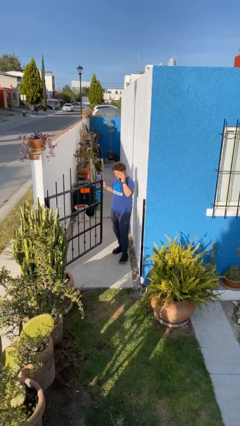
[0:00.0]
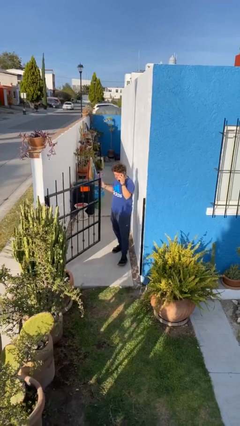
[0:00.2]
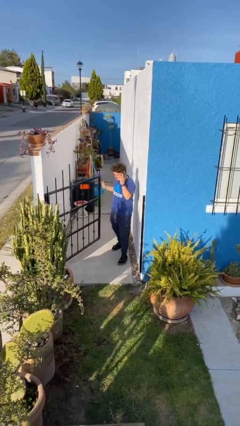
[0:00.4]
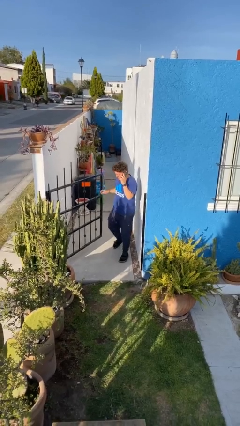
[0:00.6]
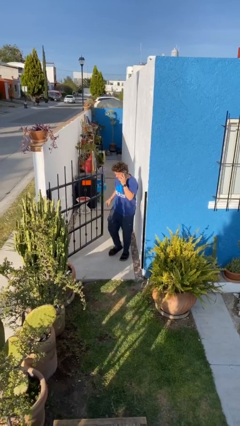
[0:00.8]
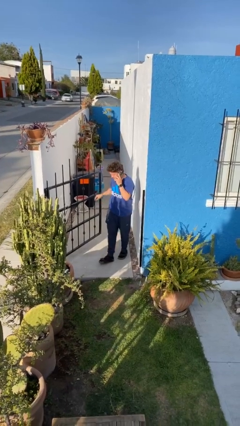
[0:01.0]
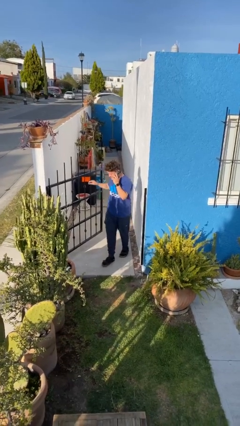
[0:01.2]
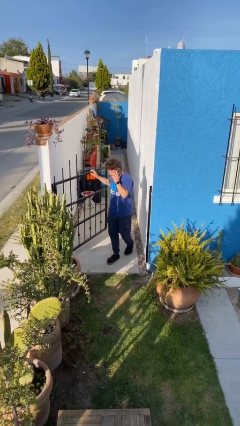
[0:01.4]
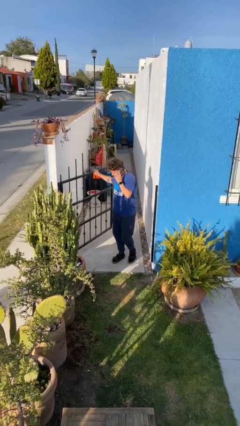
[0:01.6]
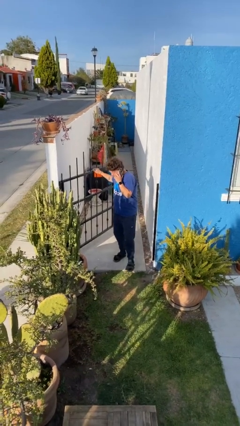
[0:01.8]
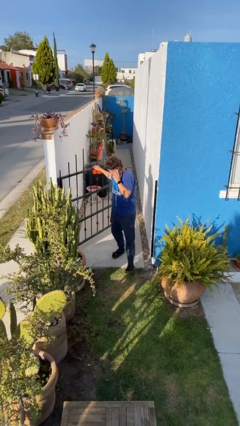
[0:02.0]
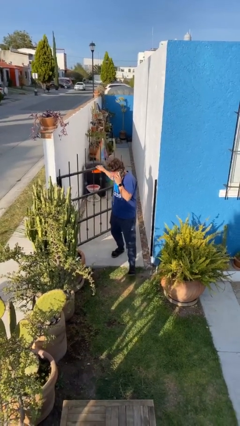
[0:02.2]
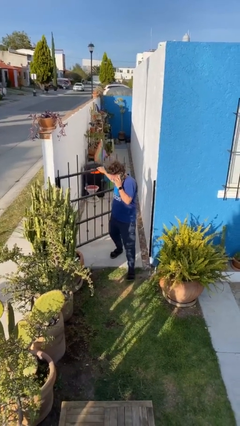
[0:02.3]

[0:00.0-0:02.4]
person enters scene through structure

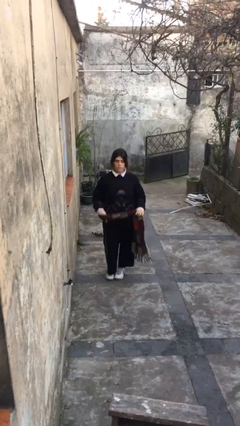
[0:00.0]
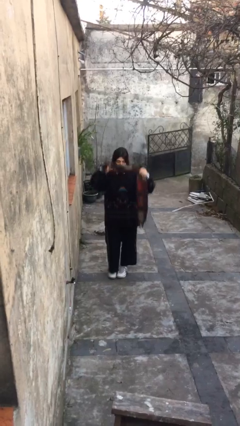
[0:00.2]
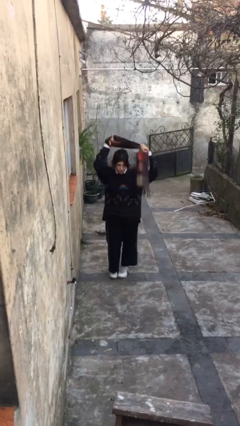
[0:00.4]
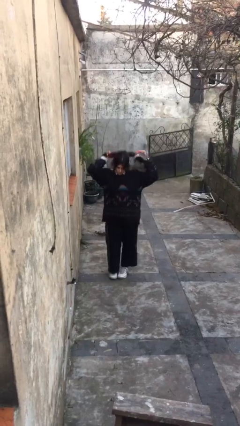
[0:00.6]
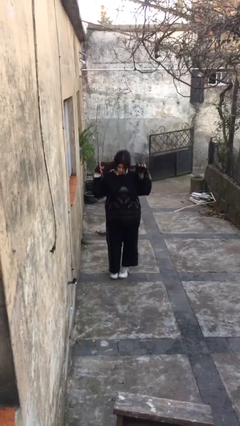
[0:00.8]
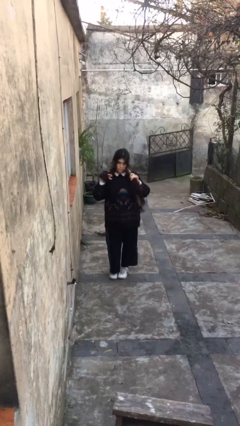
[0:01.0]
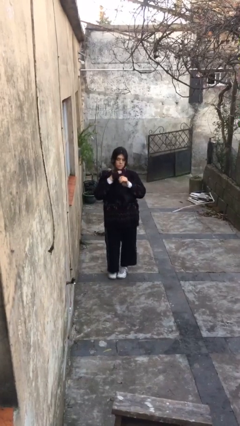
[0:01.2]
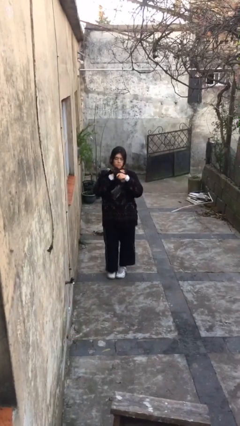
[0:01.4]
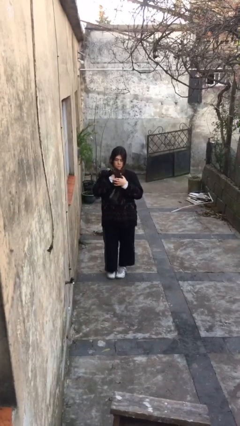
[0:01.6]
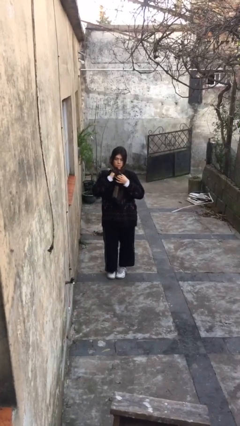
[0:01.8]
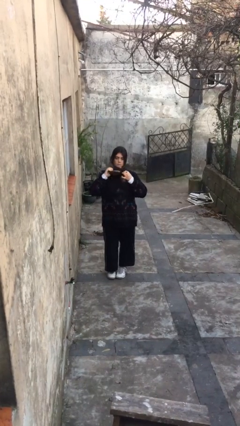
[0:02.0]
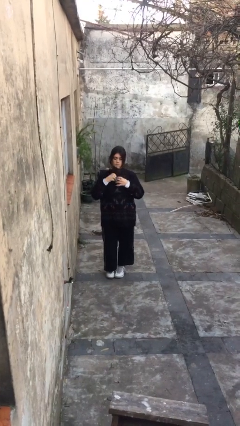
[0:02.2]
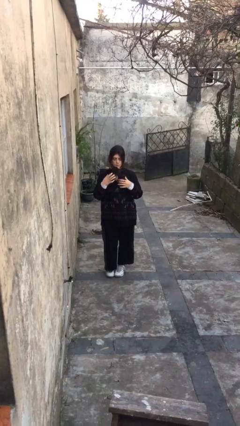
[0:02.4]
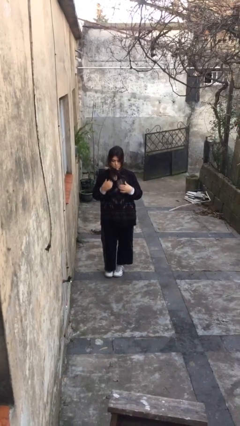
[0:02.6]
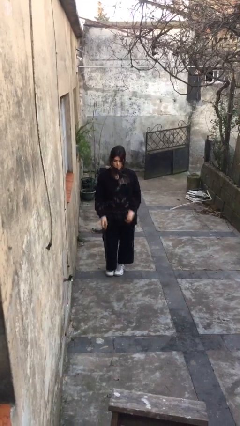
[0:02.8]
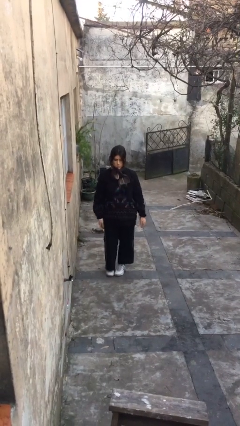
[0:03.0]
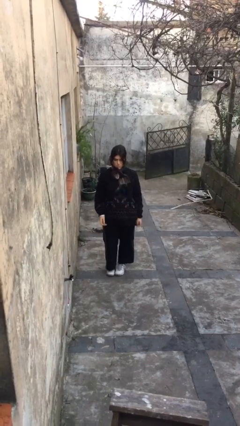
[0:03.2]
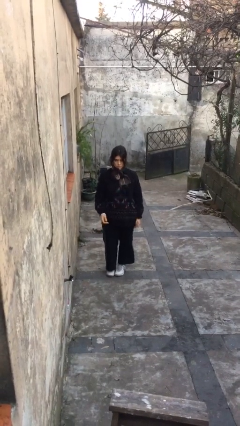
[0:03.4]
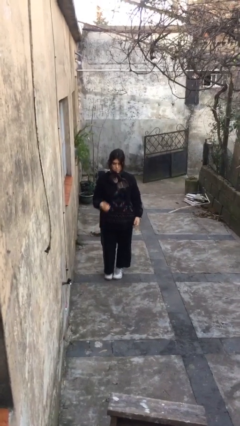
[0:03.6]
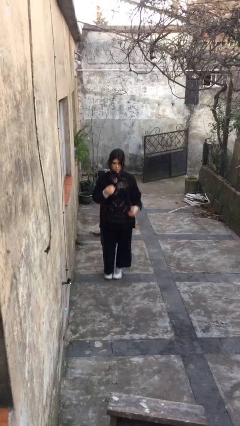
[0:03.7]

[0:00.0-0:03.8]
person puts on scarf

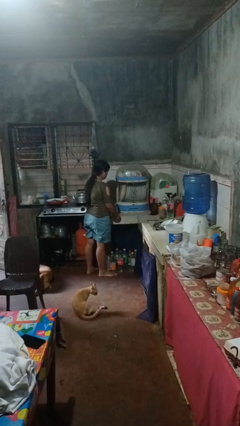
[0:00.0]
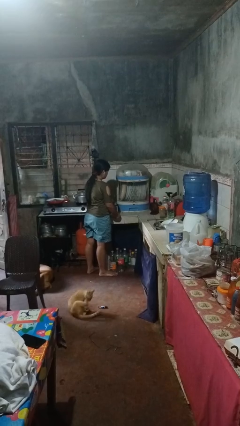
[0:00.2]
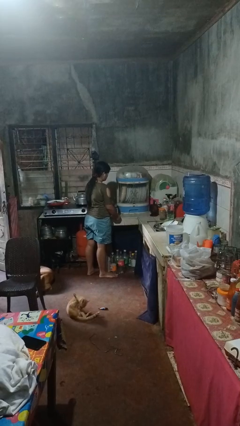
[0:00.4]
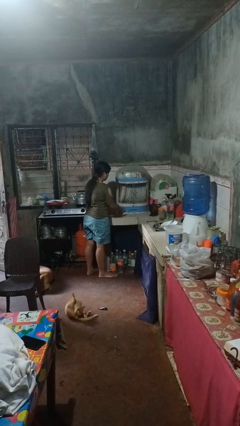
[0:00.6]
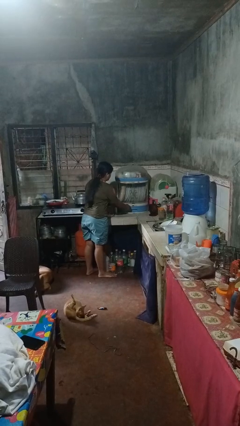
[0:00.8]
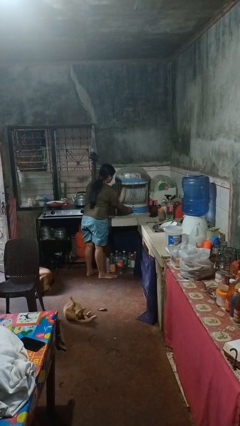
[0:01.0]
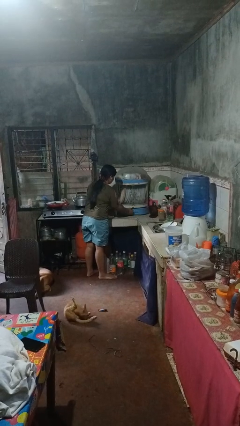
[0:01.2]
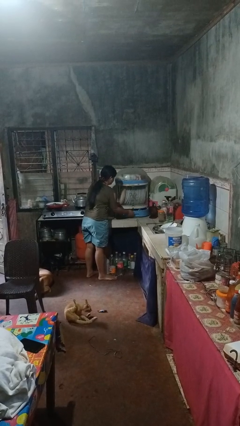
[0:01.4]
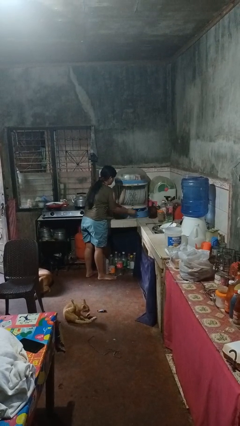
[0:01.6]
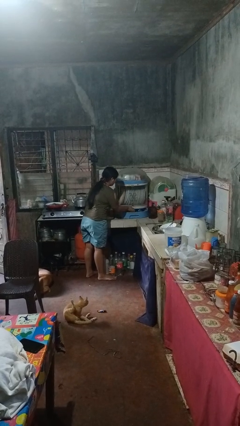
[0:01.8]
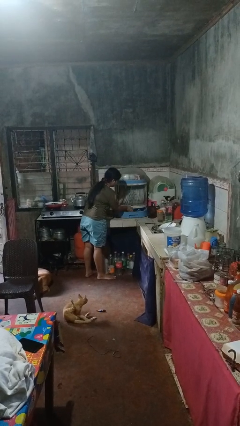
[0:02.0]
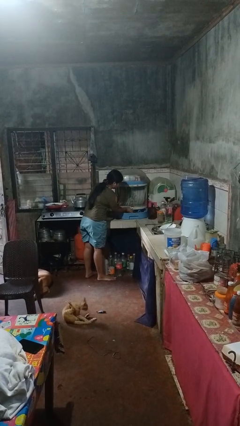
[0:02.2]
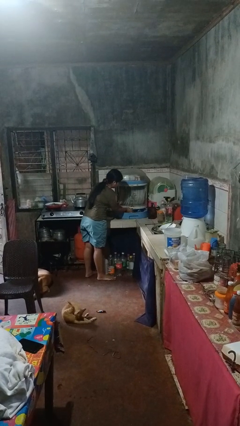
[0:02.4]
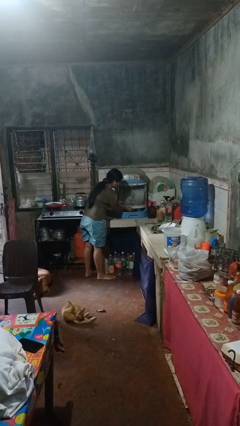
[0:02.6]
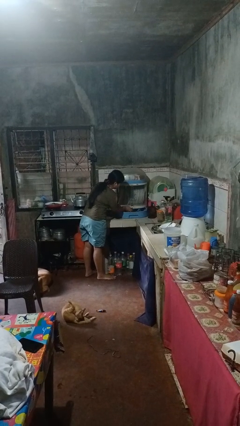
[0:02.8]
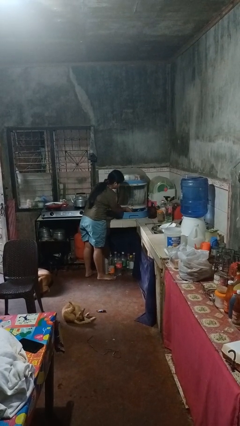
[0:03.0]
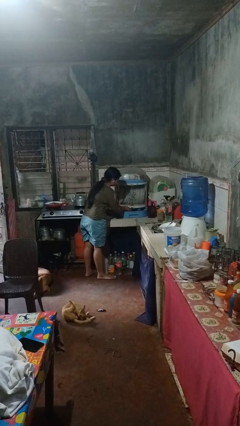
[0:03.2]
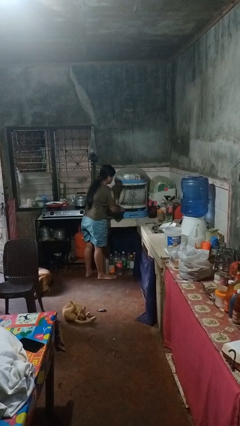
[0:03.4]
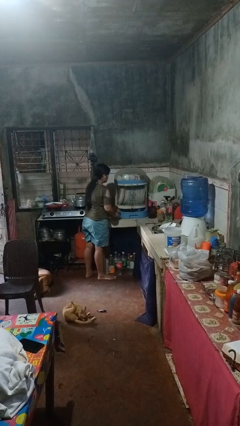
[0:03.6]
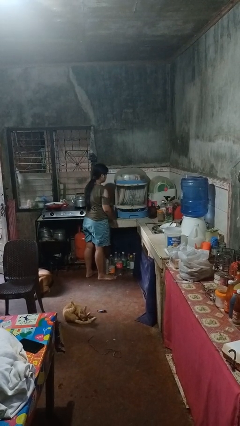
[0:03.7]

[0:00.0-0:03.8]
person searches in kitchen drawer

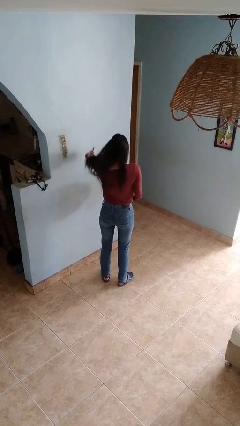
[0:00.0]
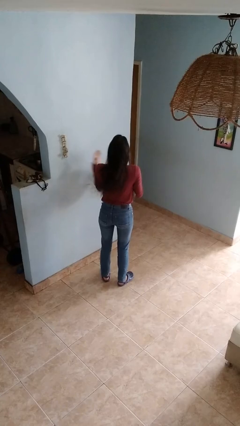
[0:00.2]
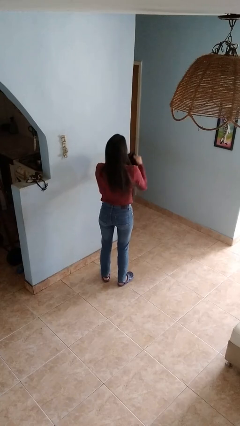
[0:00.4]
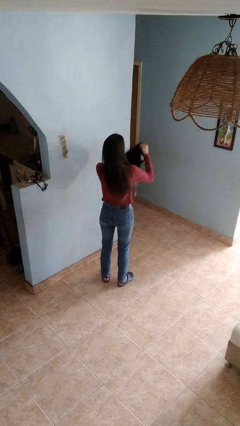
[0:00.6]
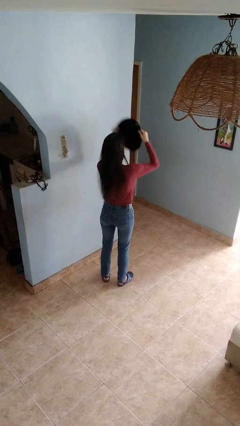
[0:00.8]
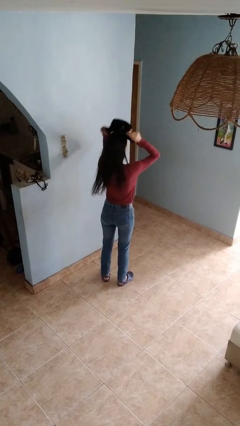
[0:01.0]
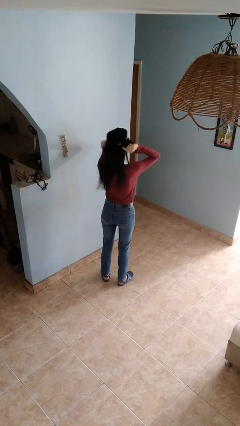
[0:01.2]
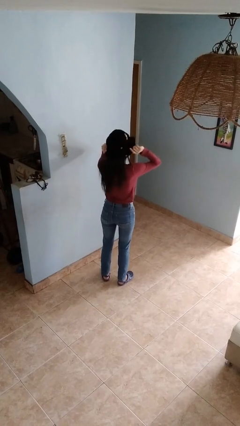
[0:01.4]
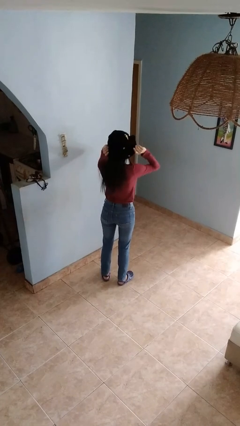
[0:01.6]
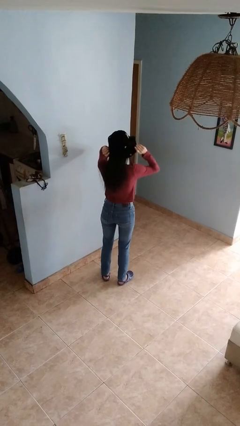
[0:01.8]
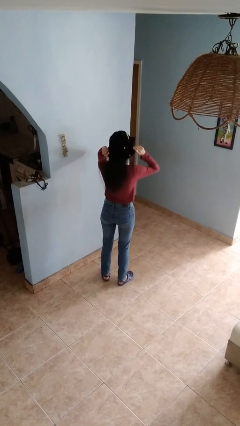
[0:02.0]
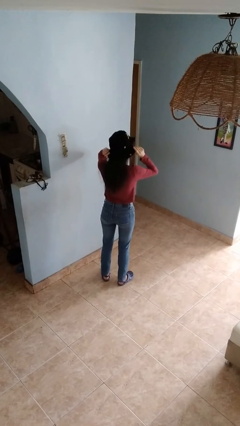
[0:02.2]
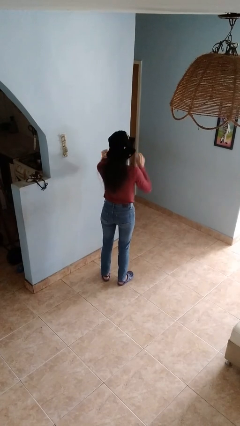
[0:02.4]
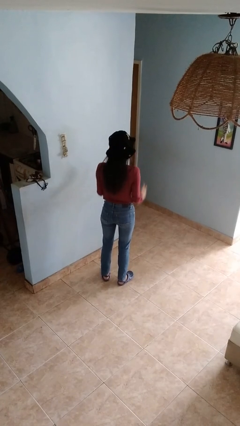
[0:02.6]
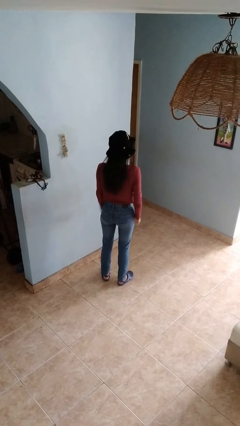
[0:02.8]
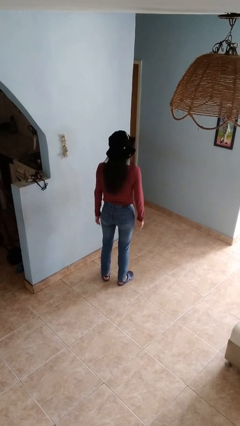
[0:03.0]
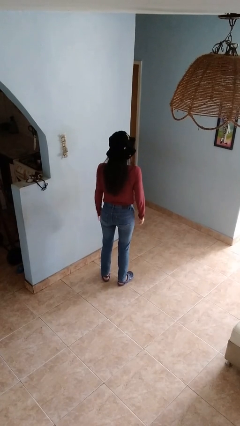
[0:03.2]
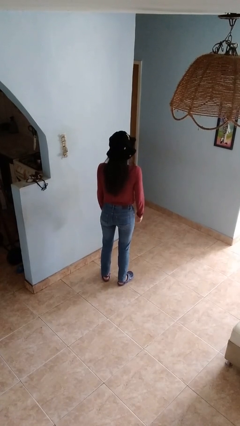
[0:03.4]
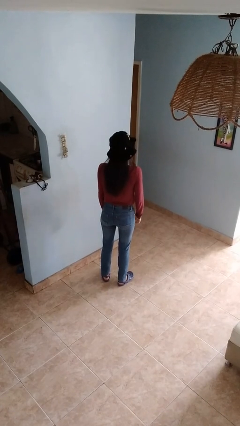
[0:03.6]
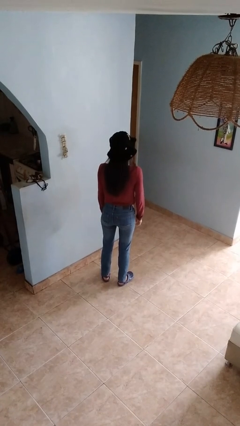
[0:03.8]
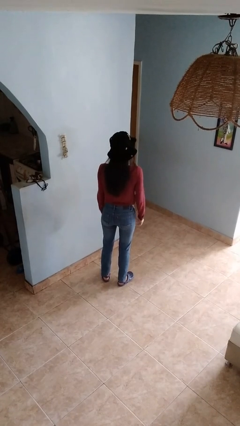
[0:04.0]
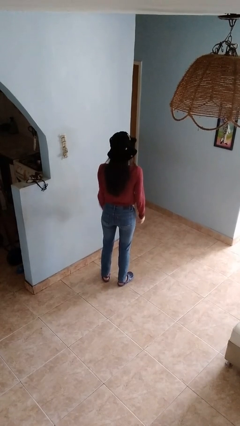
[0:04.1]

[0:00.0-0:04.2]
person puts on hat

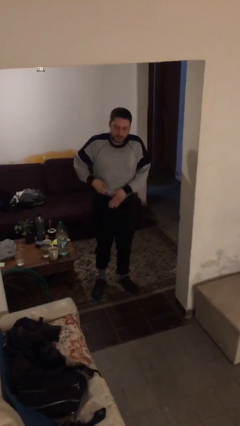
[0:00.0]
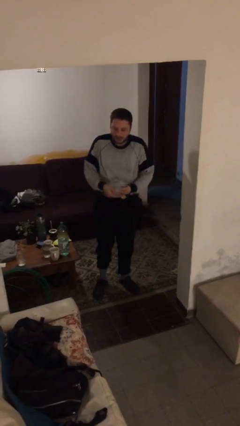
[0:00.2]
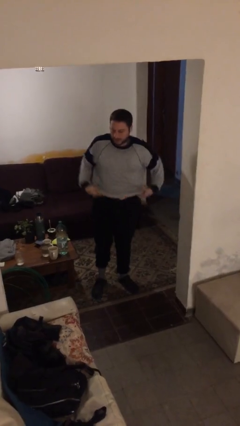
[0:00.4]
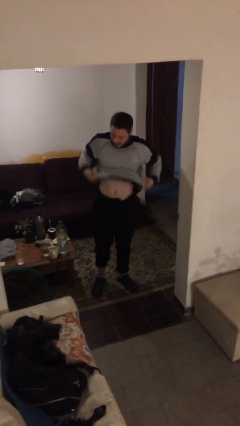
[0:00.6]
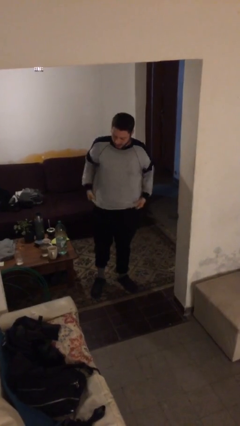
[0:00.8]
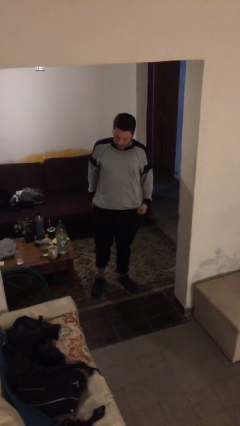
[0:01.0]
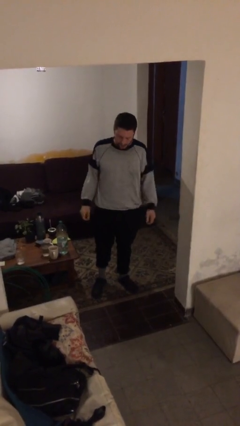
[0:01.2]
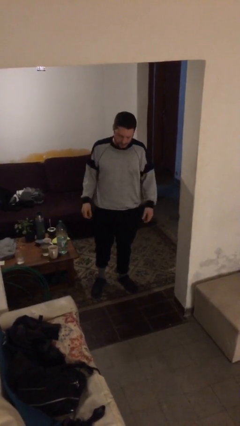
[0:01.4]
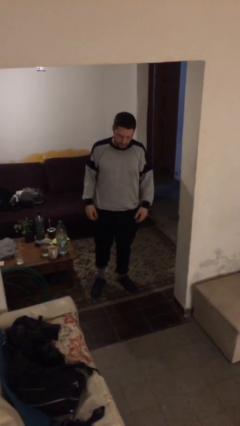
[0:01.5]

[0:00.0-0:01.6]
person untucks shirt

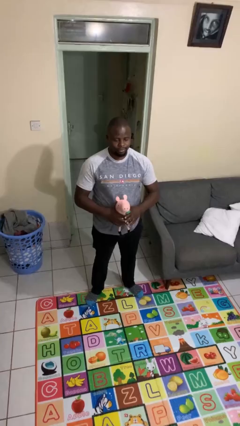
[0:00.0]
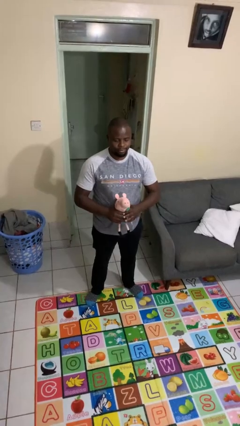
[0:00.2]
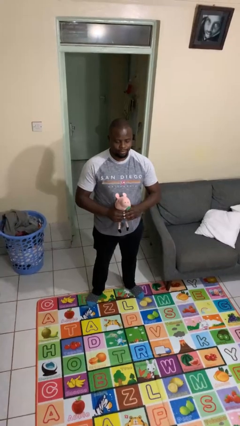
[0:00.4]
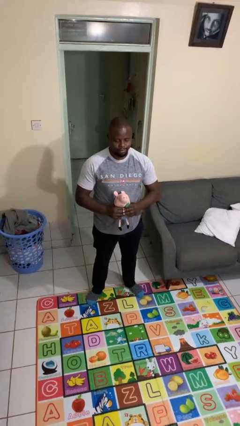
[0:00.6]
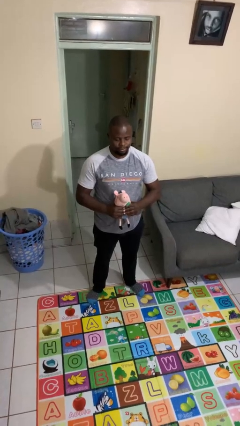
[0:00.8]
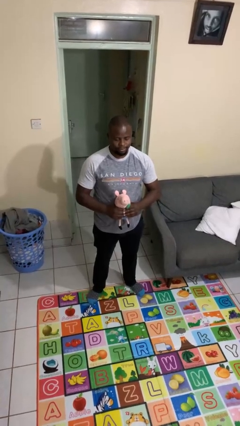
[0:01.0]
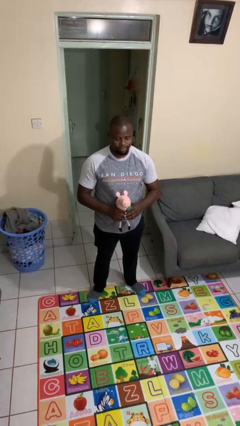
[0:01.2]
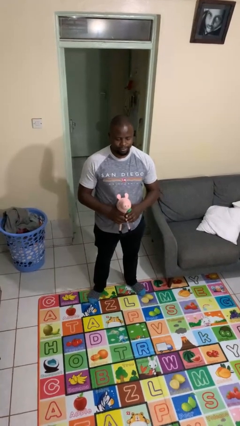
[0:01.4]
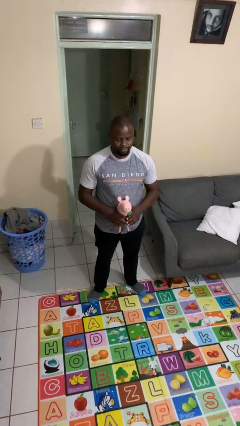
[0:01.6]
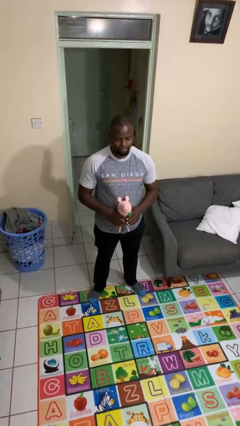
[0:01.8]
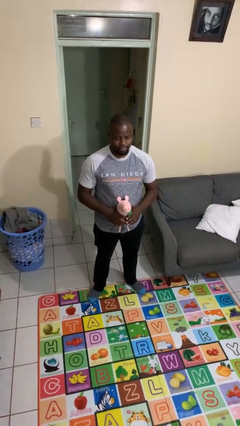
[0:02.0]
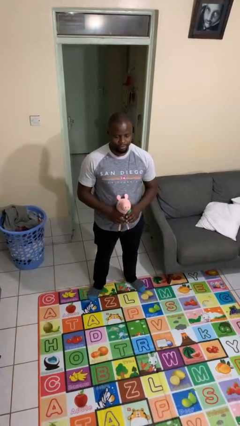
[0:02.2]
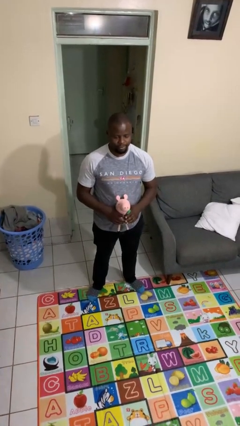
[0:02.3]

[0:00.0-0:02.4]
person squeezes object
